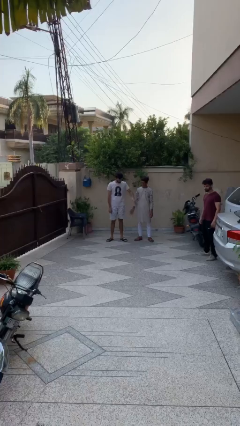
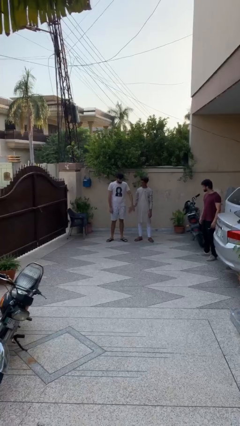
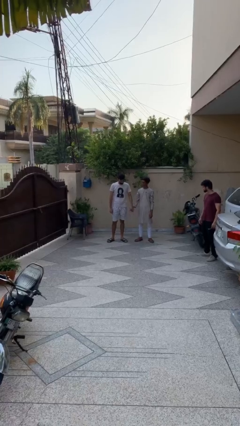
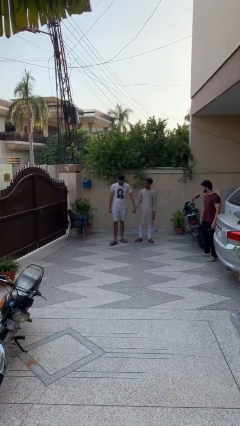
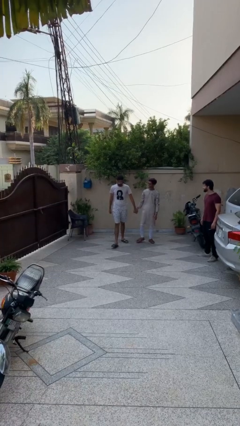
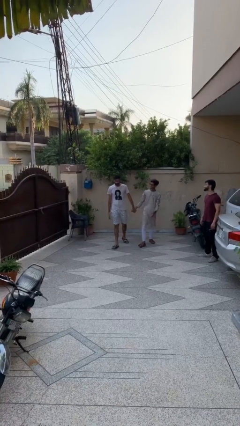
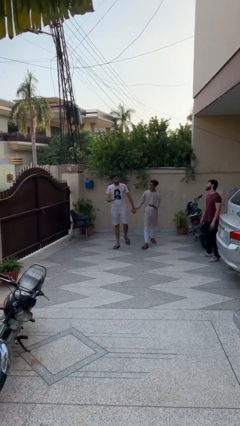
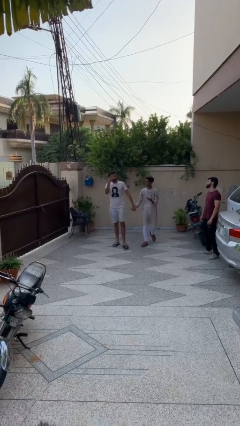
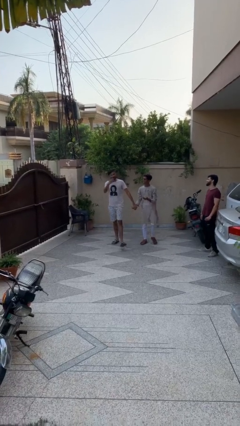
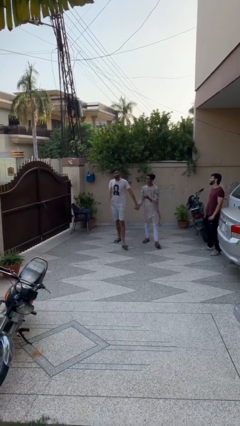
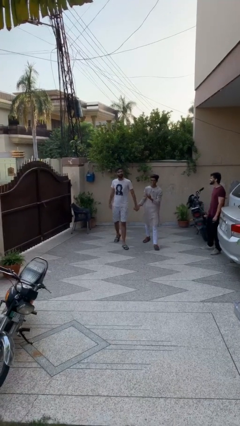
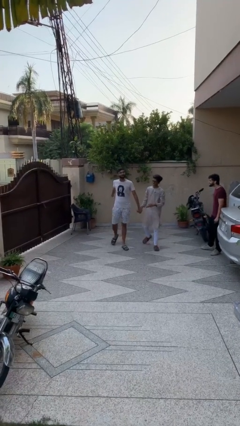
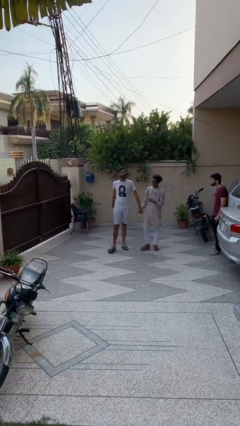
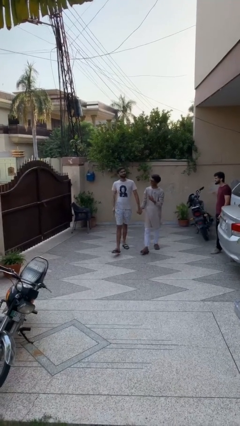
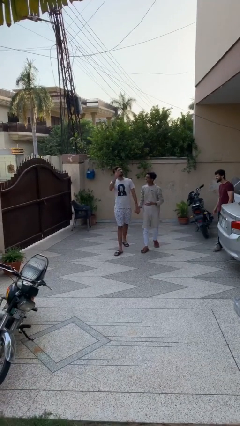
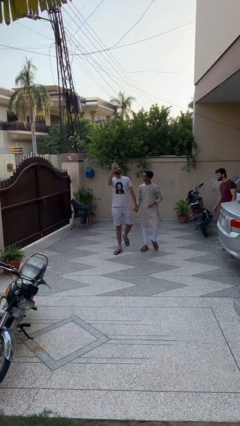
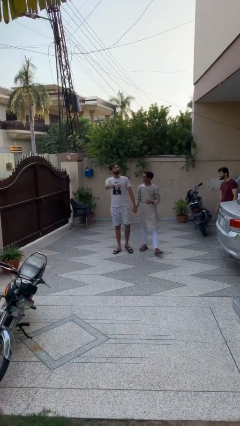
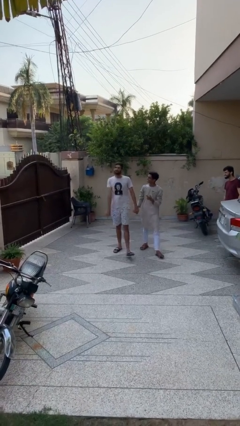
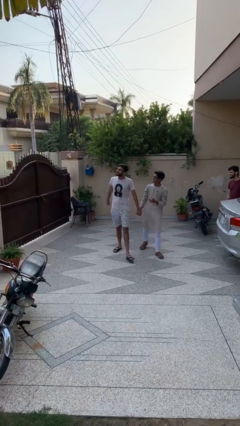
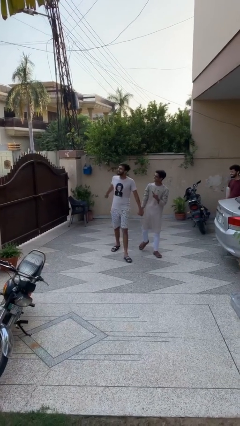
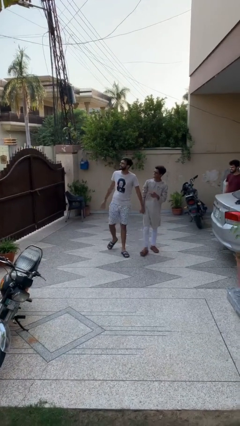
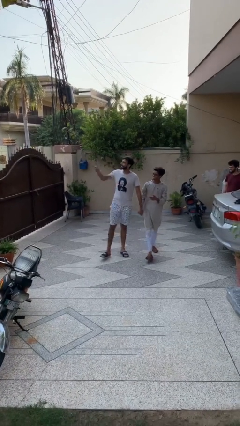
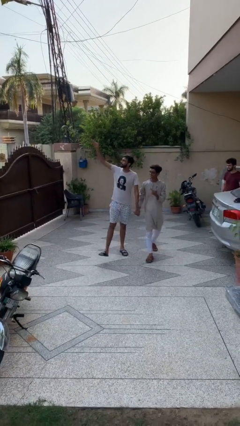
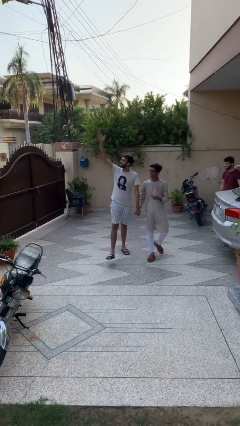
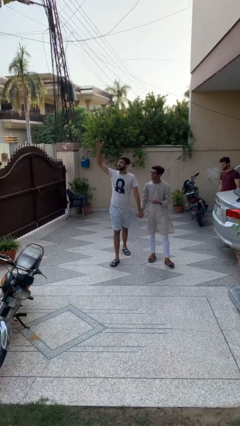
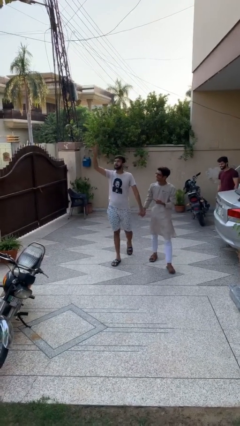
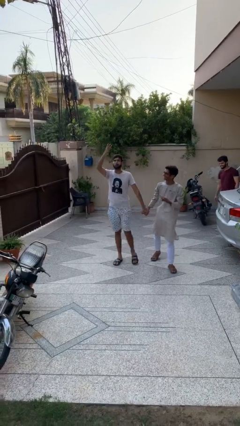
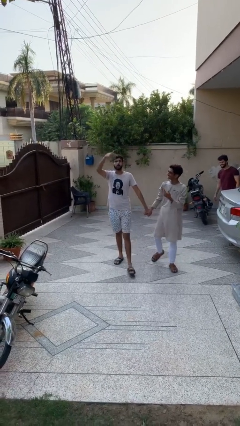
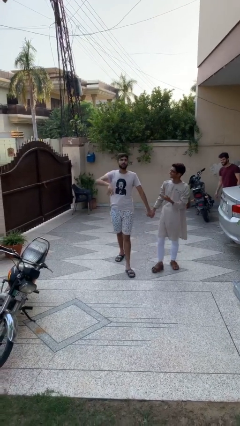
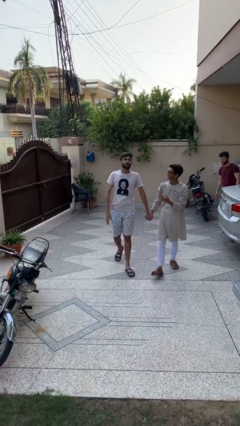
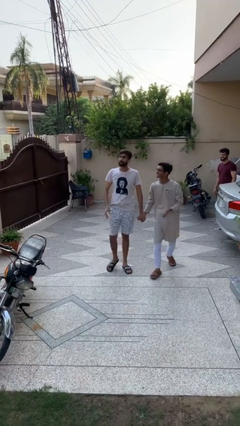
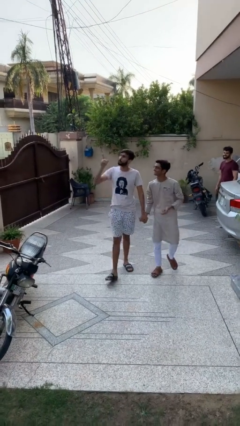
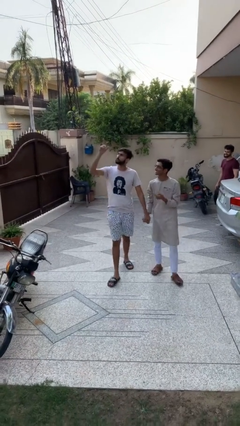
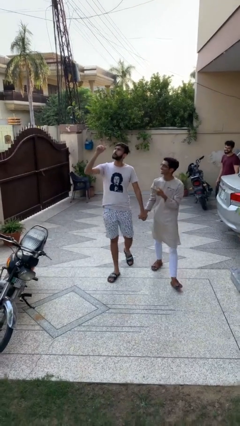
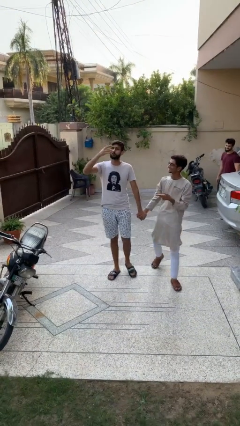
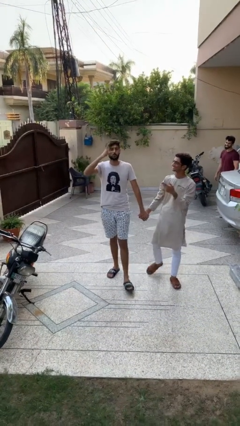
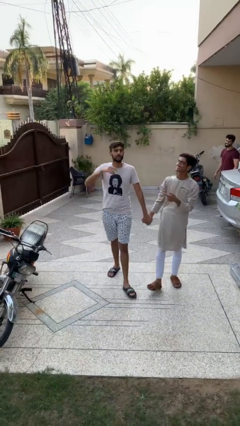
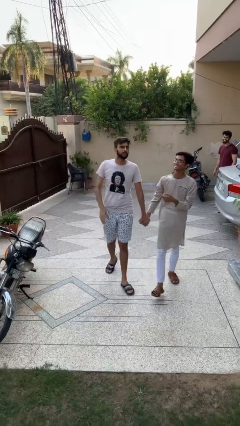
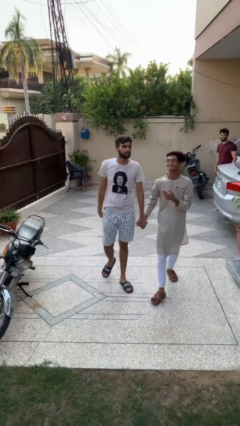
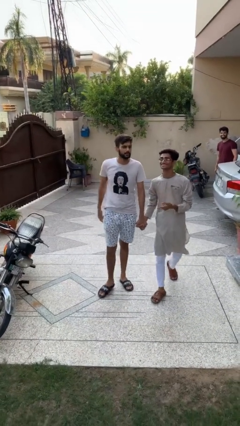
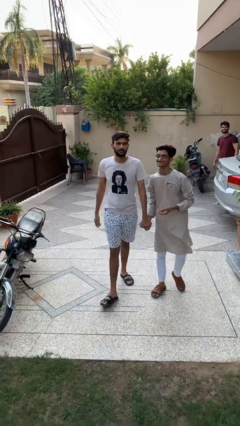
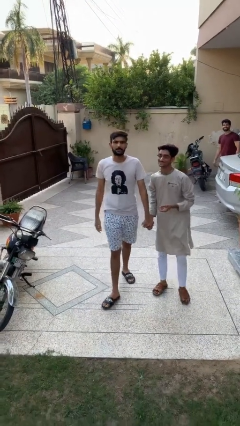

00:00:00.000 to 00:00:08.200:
person holds hand

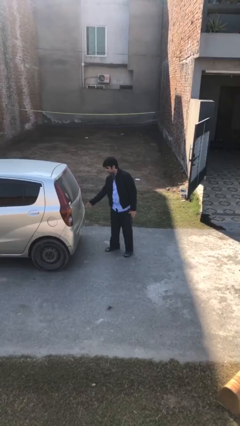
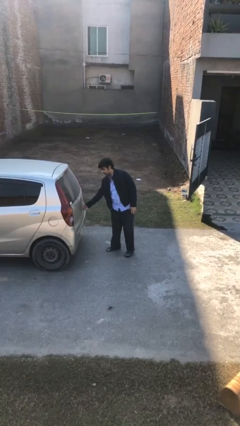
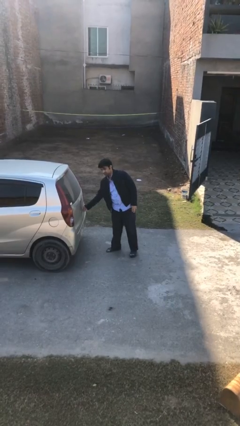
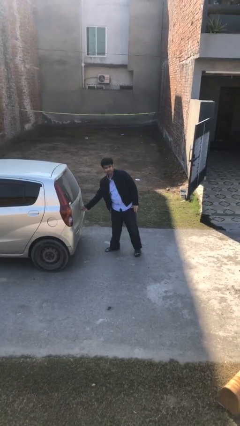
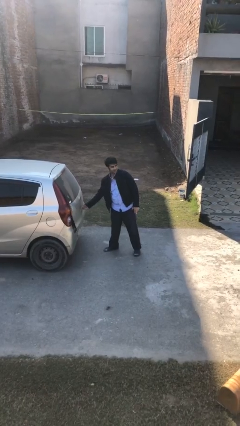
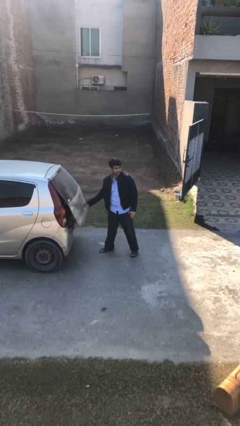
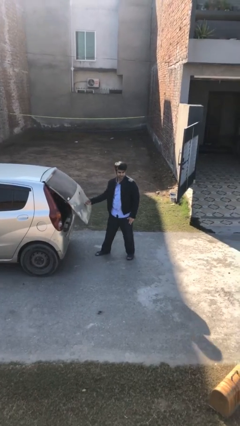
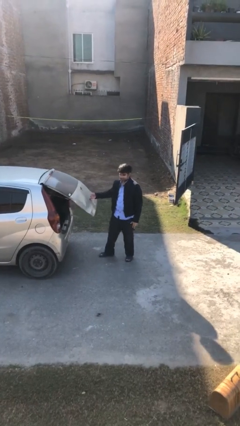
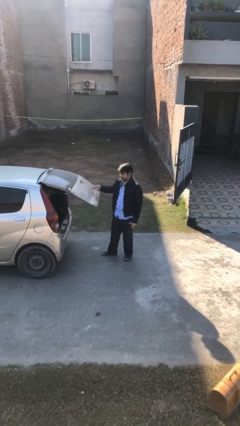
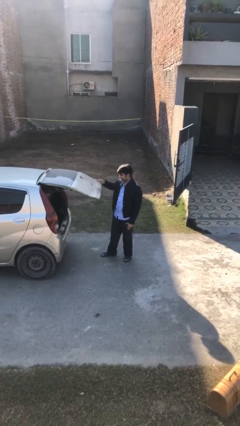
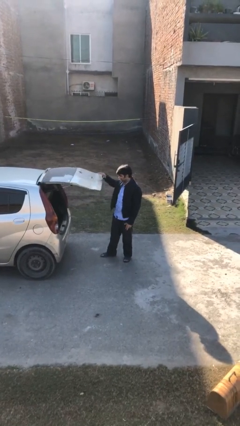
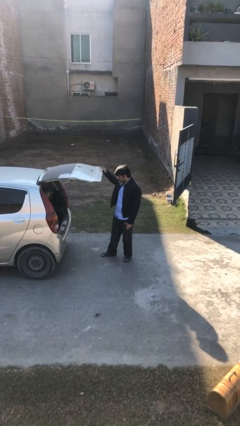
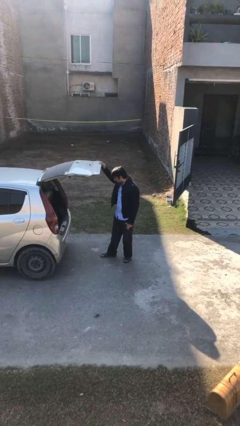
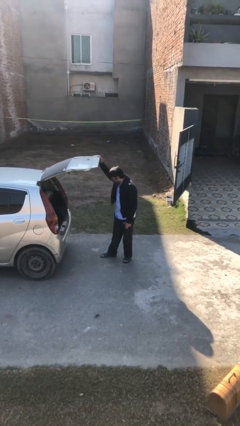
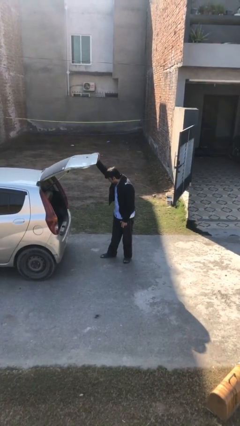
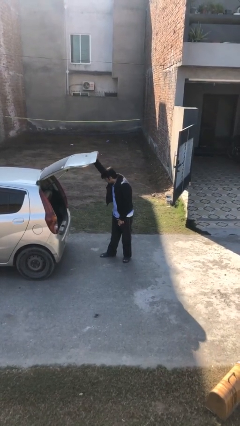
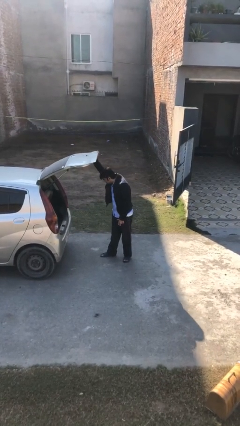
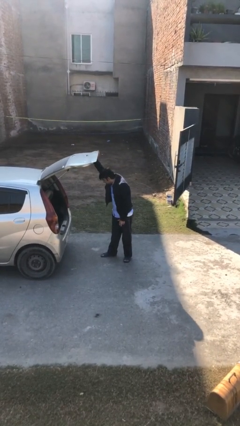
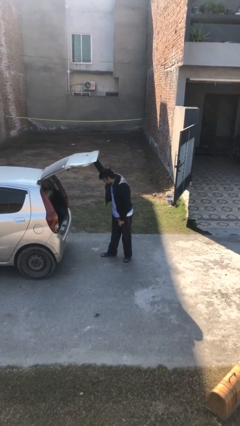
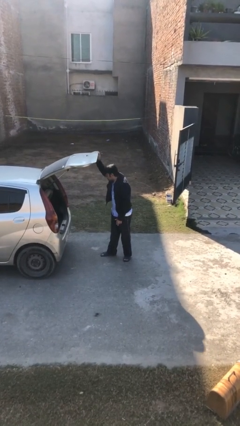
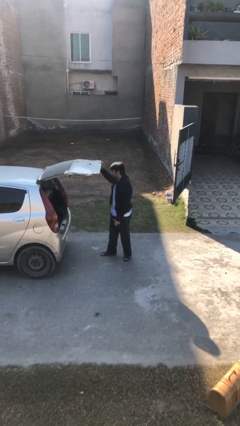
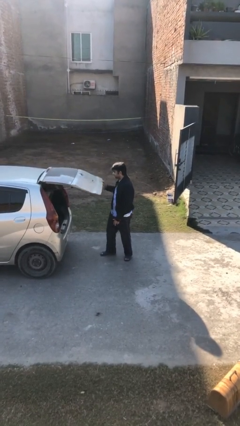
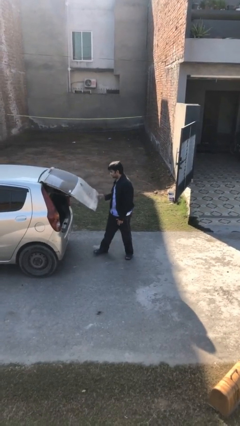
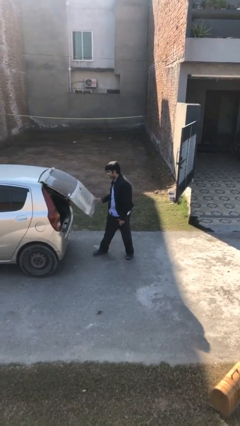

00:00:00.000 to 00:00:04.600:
person opens car trunk

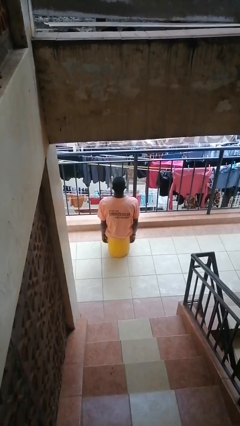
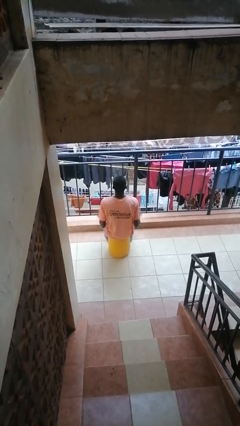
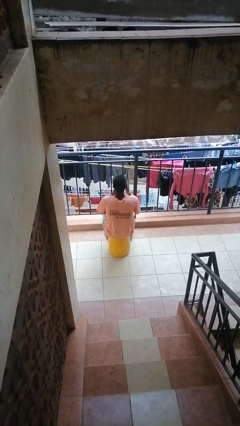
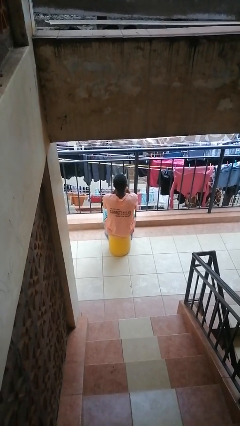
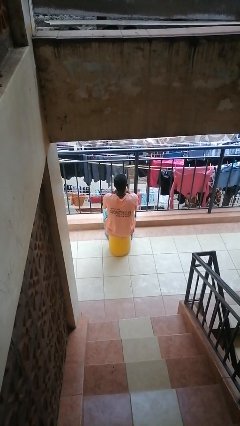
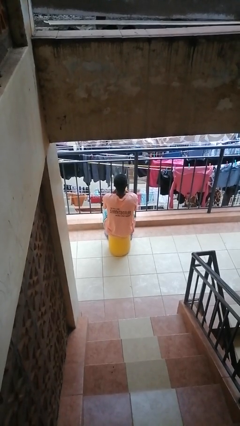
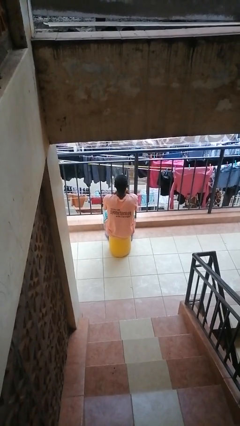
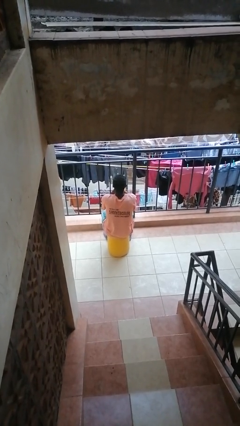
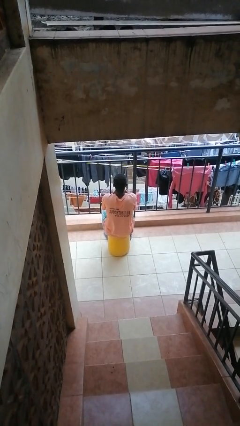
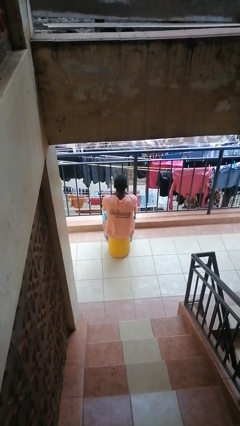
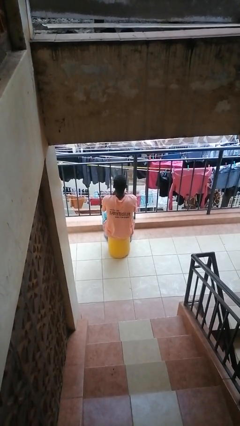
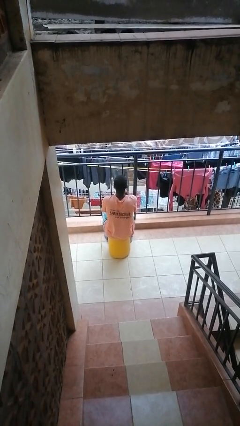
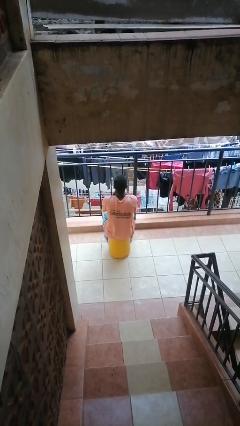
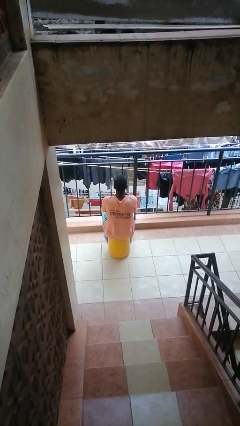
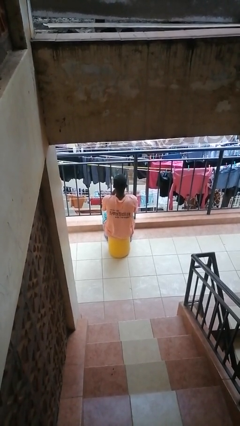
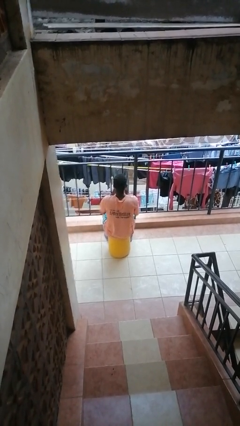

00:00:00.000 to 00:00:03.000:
person blows into hands

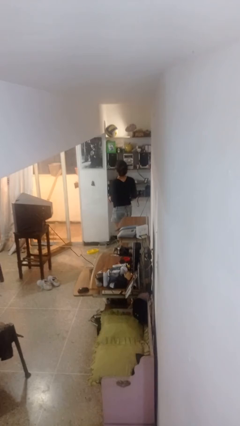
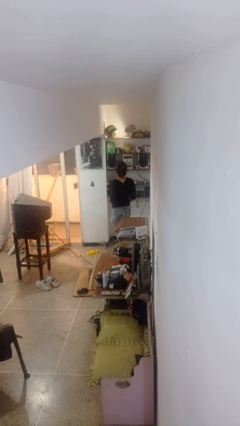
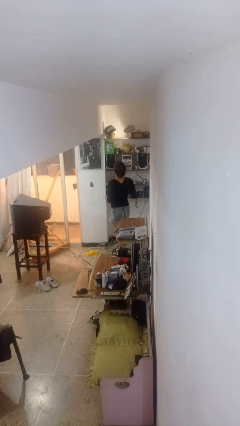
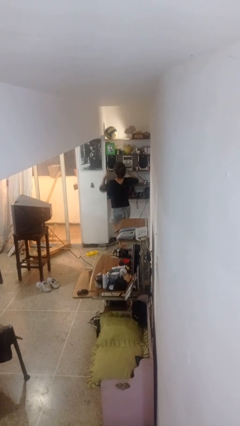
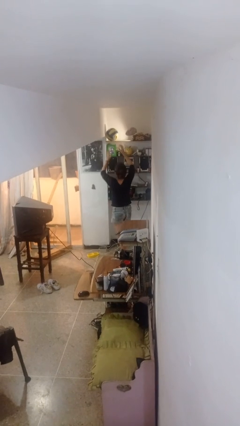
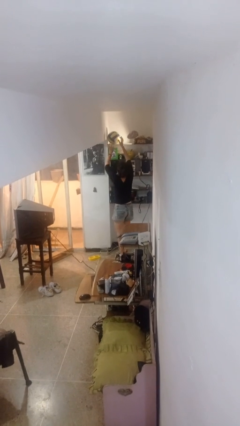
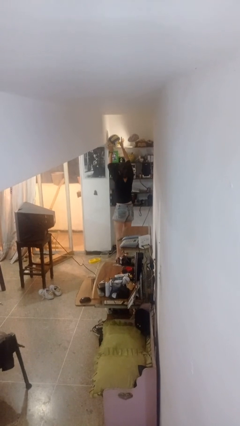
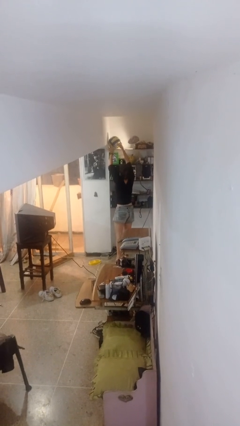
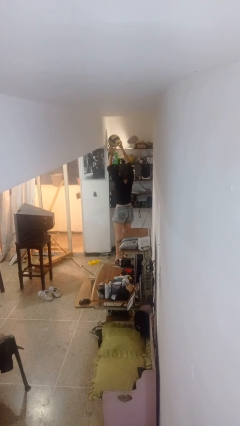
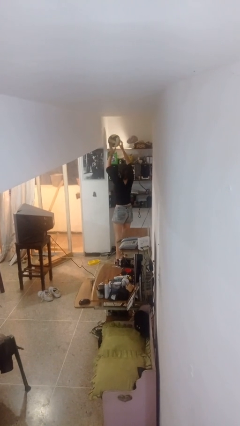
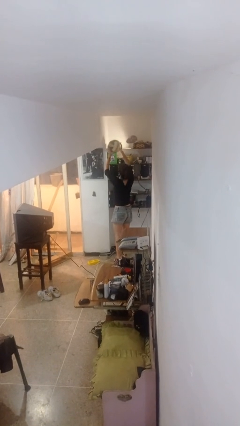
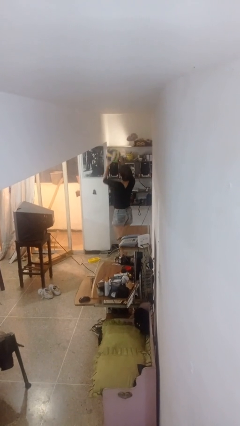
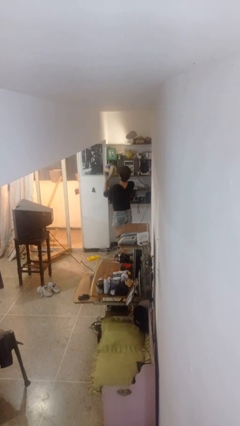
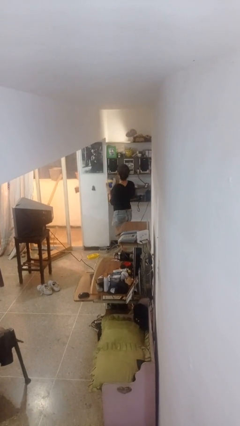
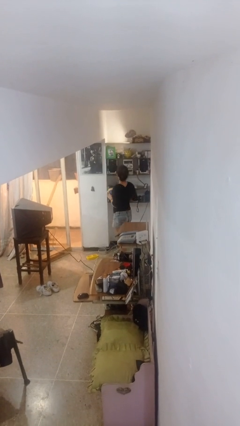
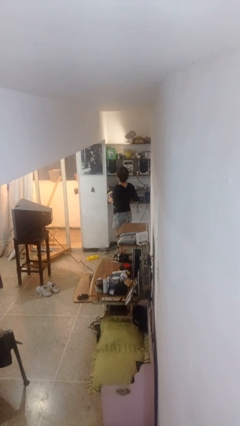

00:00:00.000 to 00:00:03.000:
person picks up object from shelf
